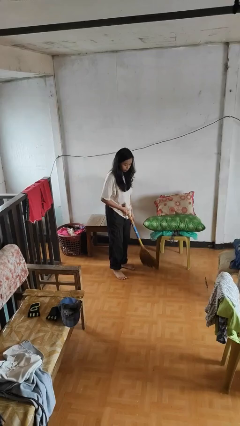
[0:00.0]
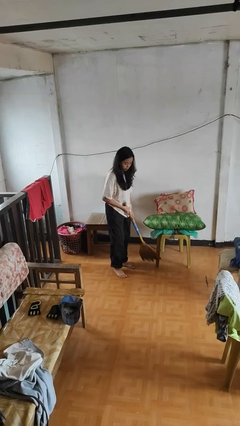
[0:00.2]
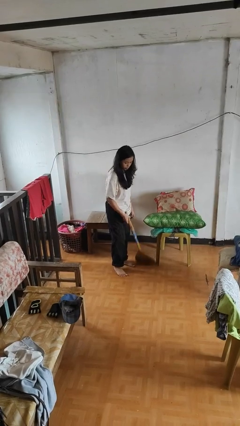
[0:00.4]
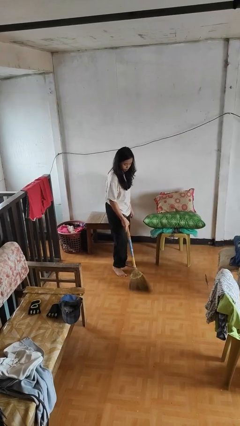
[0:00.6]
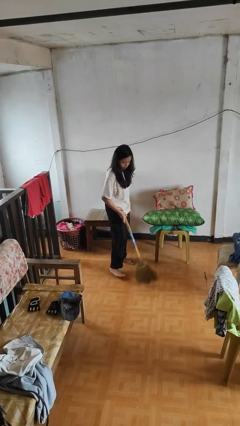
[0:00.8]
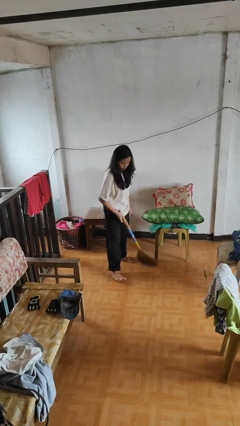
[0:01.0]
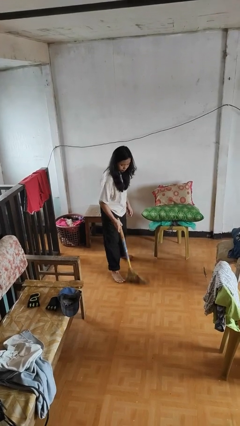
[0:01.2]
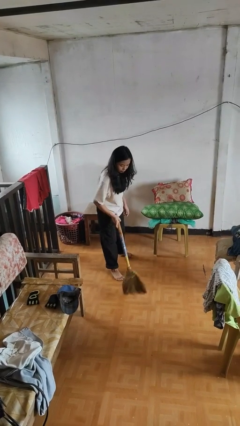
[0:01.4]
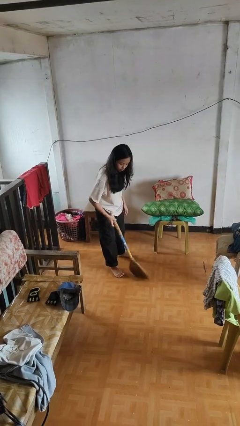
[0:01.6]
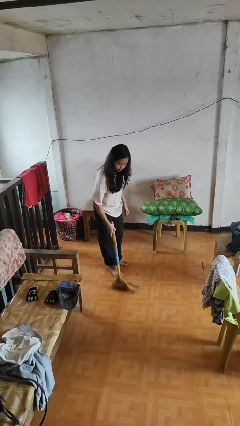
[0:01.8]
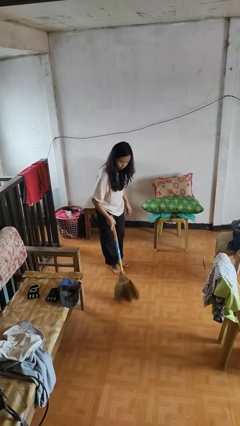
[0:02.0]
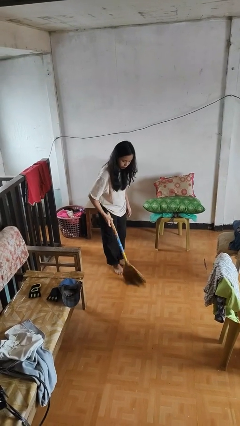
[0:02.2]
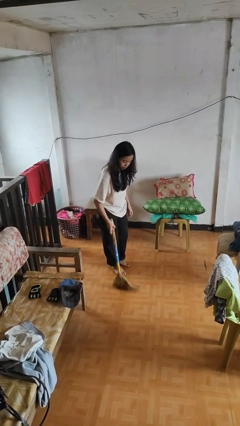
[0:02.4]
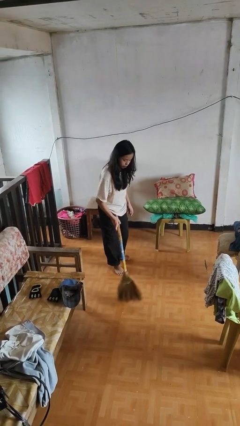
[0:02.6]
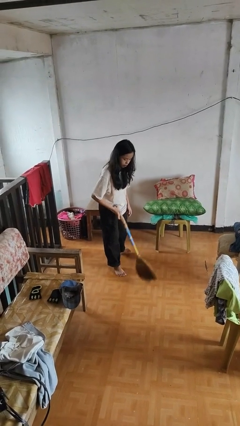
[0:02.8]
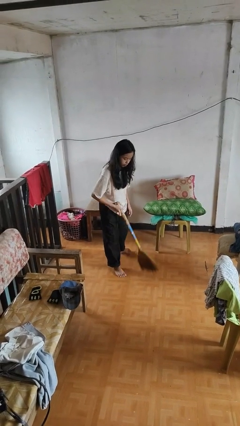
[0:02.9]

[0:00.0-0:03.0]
person sweeps floor

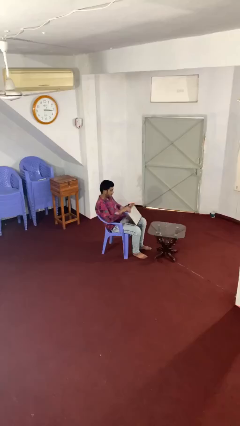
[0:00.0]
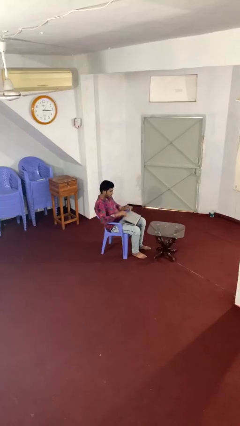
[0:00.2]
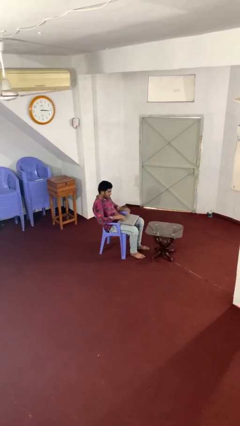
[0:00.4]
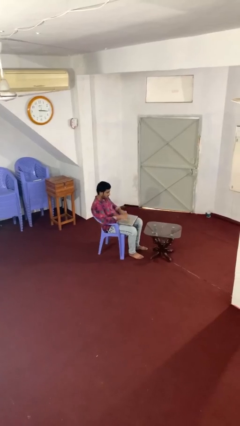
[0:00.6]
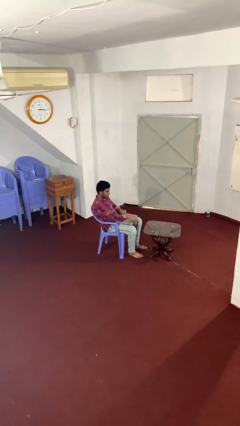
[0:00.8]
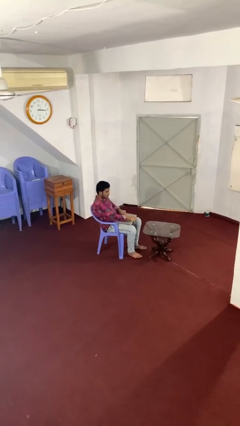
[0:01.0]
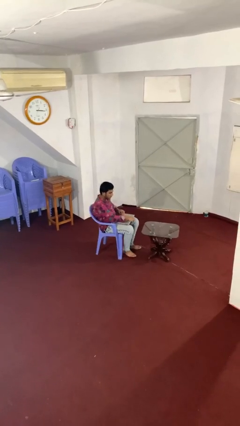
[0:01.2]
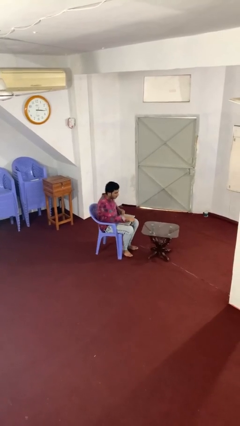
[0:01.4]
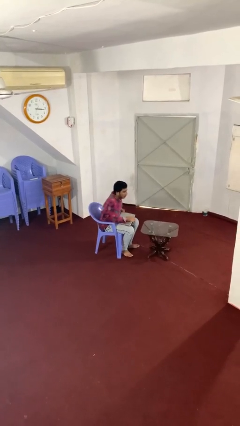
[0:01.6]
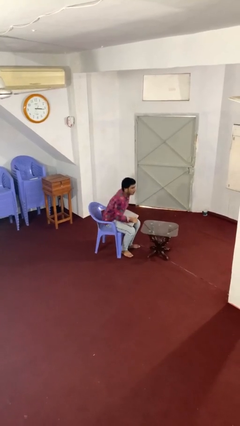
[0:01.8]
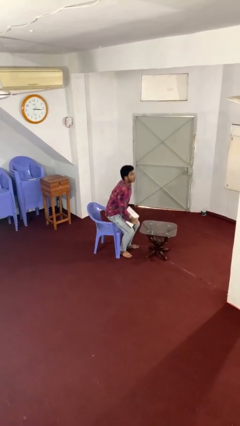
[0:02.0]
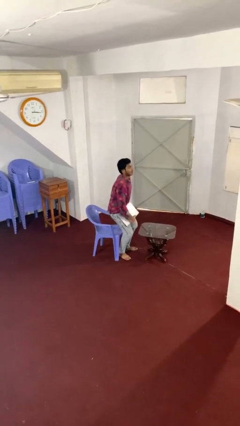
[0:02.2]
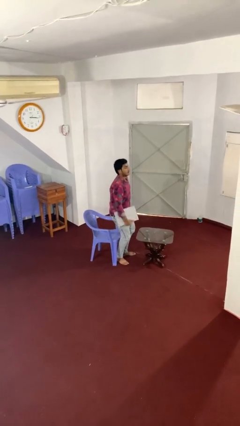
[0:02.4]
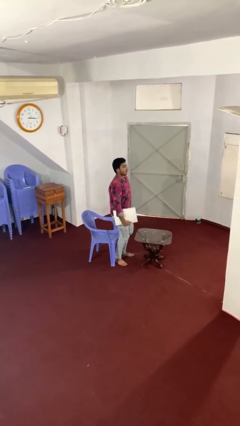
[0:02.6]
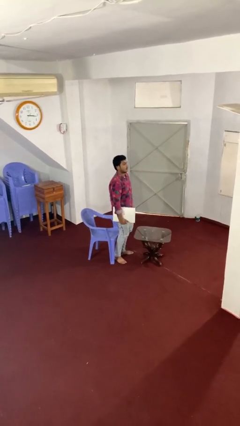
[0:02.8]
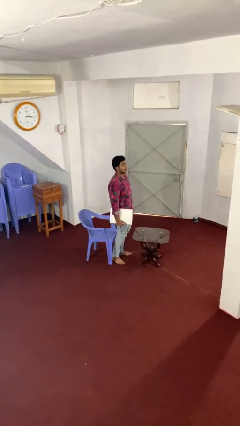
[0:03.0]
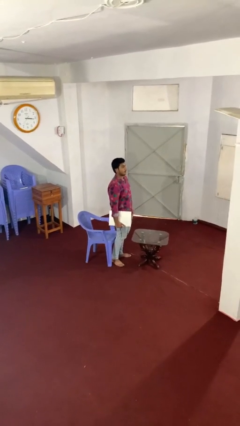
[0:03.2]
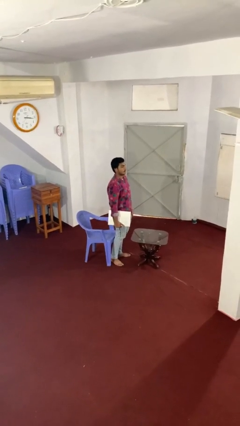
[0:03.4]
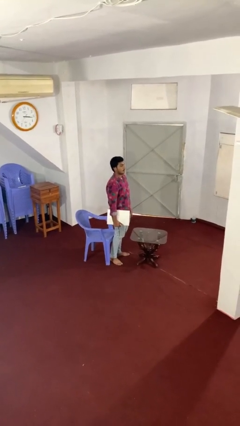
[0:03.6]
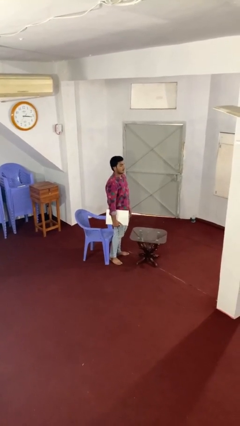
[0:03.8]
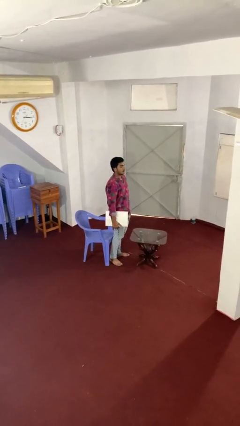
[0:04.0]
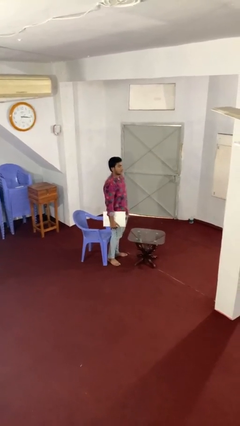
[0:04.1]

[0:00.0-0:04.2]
person stands up

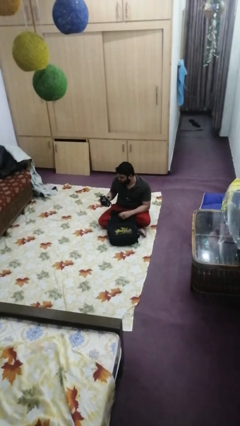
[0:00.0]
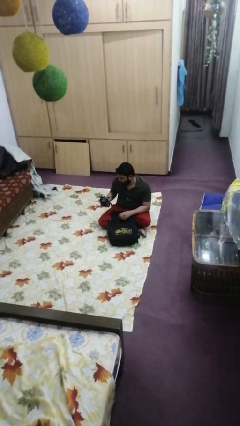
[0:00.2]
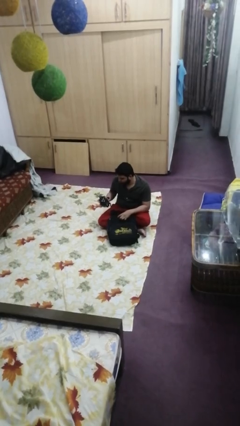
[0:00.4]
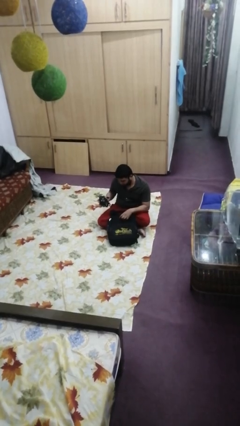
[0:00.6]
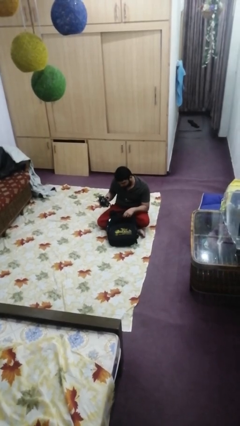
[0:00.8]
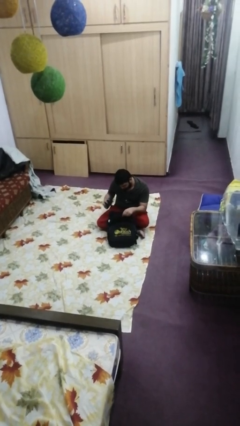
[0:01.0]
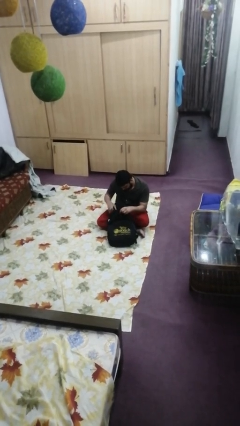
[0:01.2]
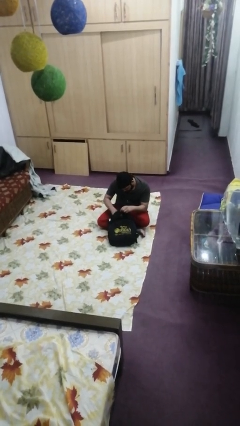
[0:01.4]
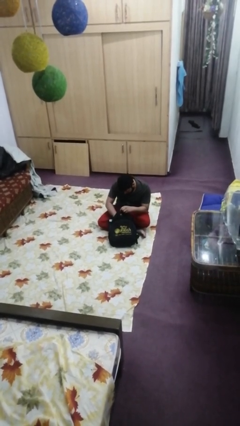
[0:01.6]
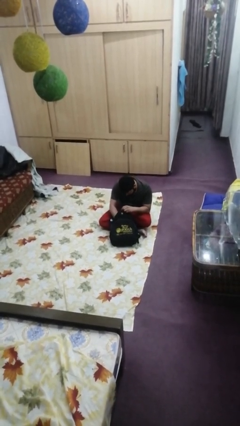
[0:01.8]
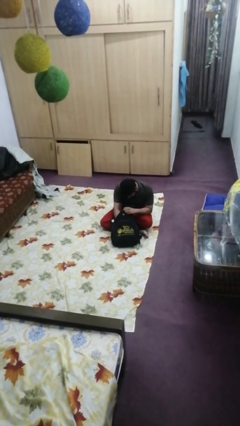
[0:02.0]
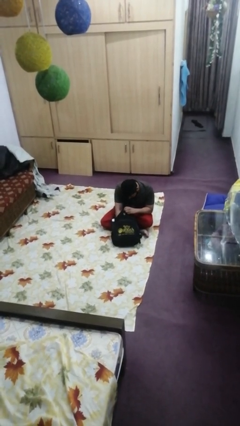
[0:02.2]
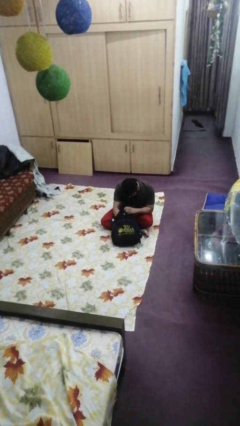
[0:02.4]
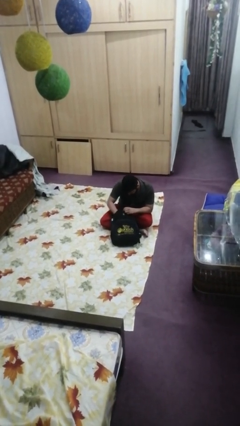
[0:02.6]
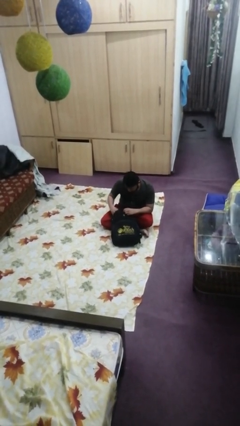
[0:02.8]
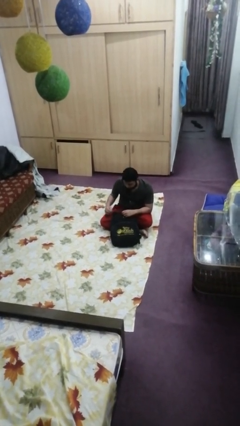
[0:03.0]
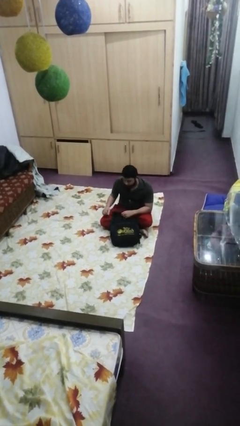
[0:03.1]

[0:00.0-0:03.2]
person puts object into backpack

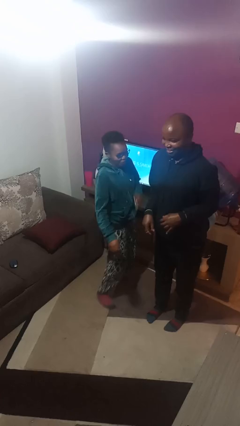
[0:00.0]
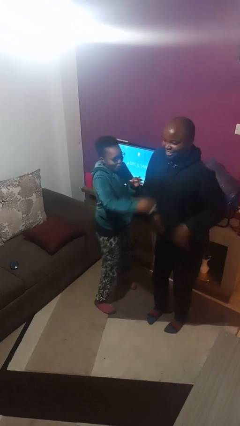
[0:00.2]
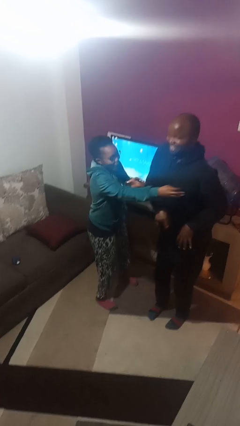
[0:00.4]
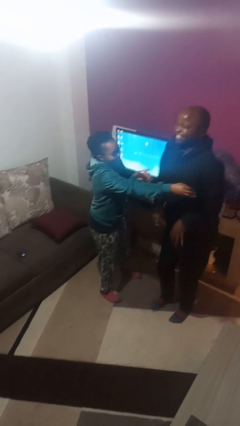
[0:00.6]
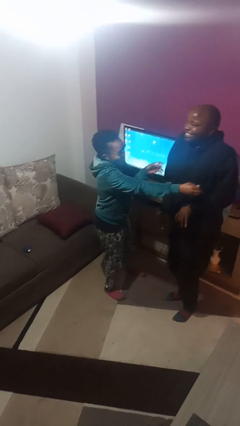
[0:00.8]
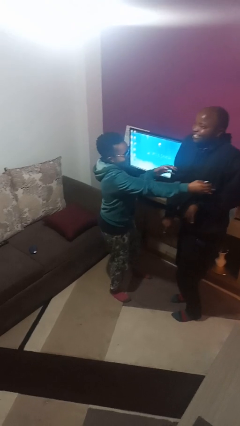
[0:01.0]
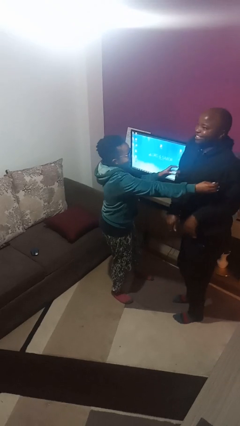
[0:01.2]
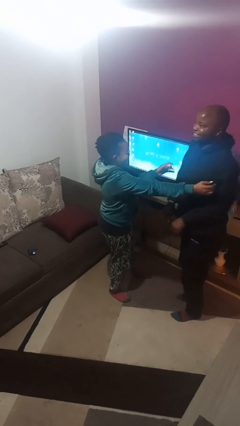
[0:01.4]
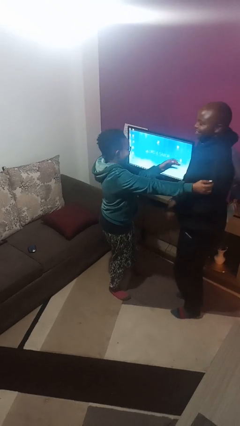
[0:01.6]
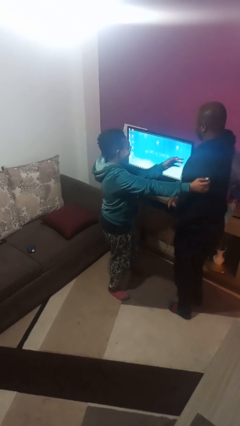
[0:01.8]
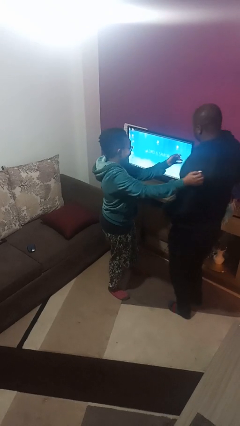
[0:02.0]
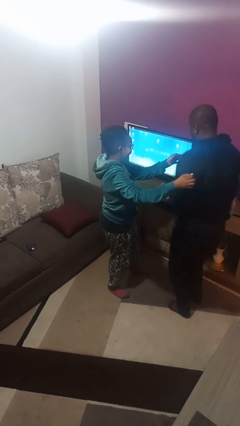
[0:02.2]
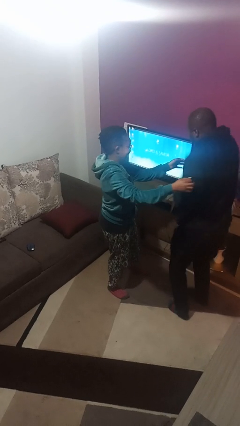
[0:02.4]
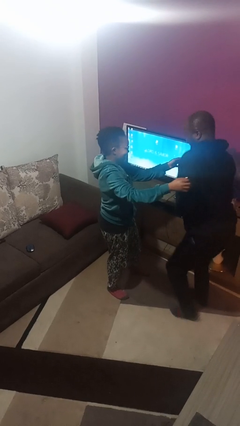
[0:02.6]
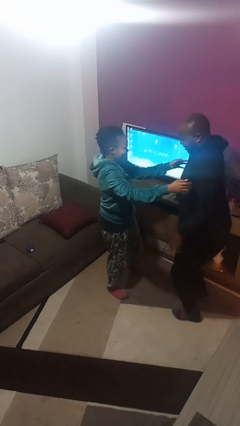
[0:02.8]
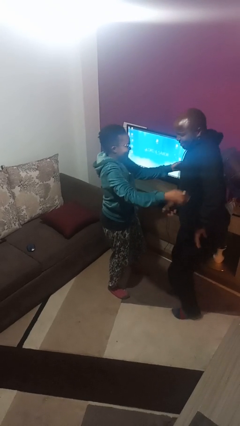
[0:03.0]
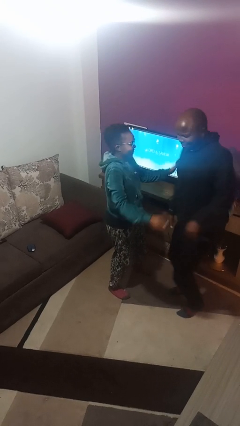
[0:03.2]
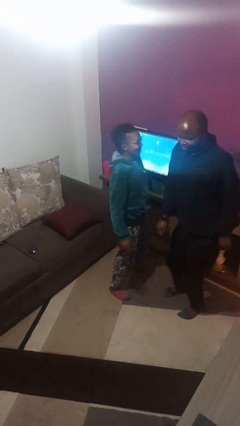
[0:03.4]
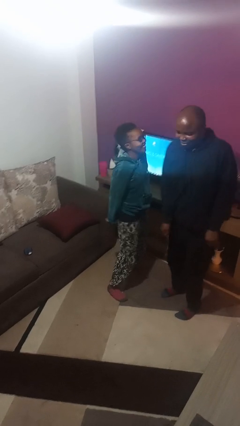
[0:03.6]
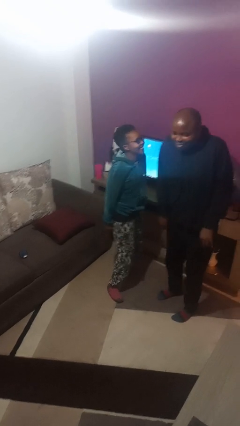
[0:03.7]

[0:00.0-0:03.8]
person tickles person

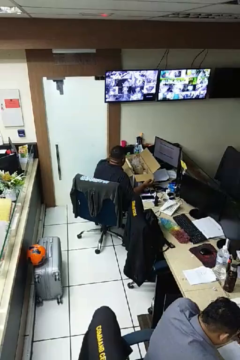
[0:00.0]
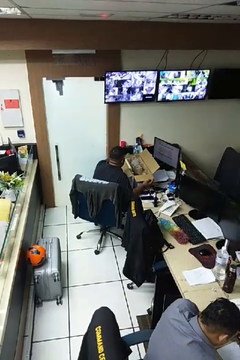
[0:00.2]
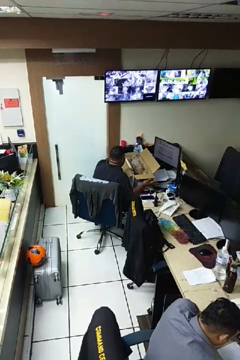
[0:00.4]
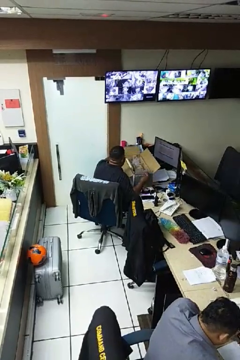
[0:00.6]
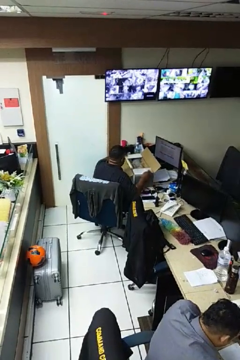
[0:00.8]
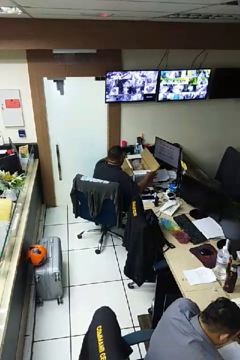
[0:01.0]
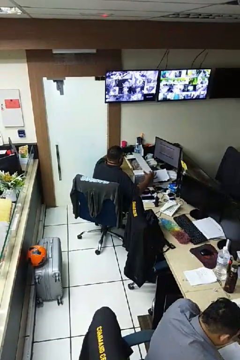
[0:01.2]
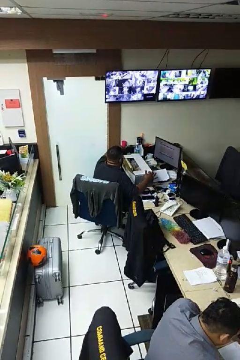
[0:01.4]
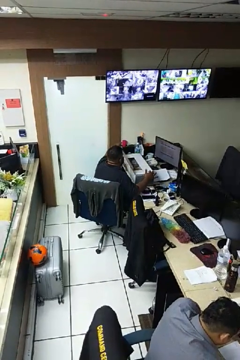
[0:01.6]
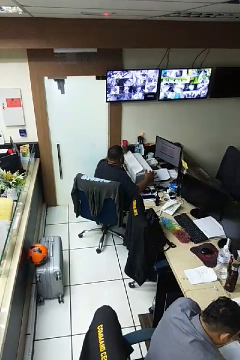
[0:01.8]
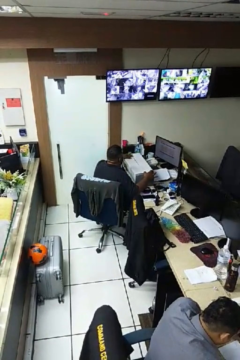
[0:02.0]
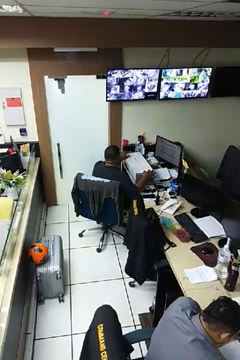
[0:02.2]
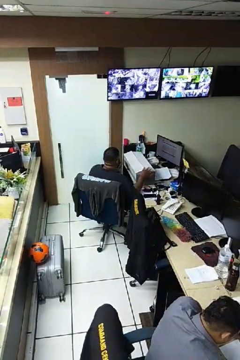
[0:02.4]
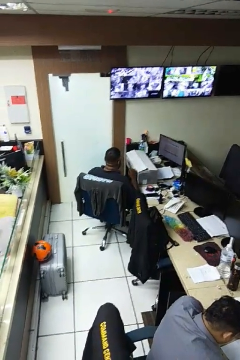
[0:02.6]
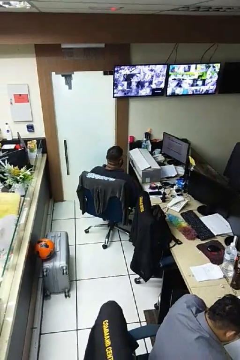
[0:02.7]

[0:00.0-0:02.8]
person closes box

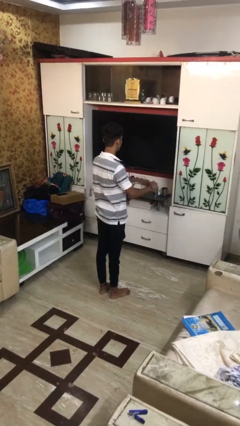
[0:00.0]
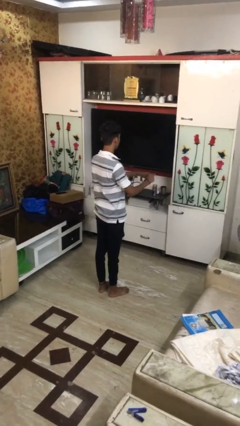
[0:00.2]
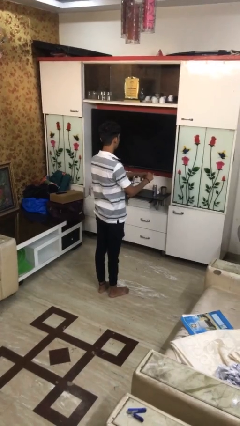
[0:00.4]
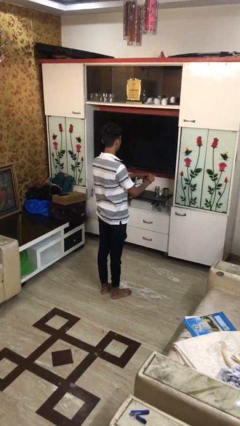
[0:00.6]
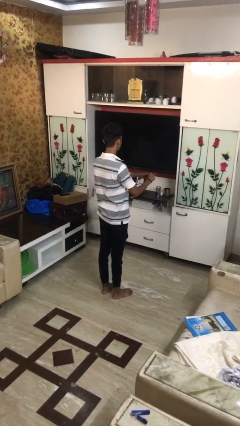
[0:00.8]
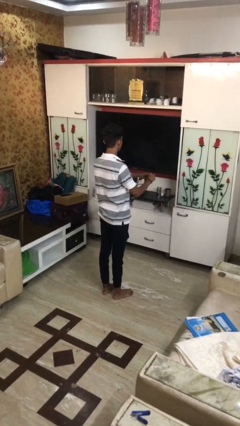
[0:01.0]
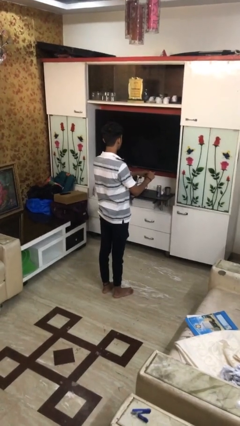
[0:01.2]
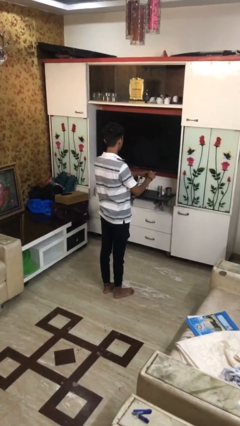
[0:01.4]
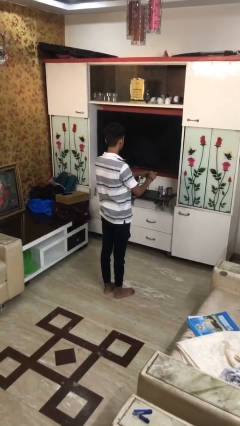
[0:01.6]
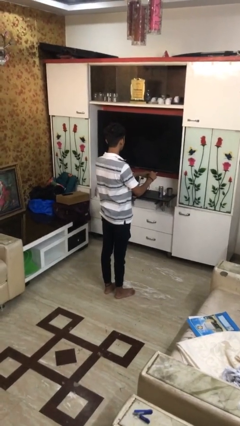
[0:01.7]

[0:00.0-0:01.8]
person files fingernails
